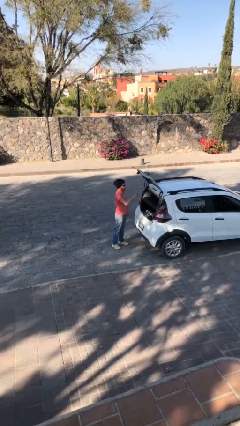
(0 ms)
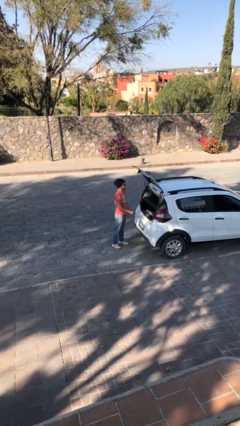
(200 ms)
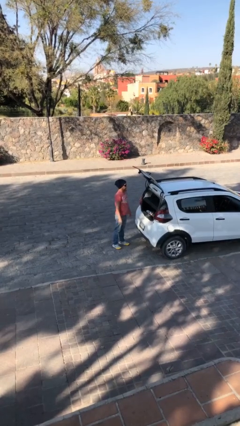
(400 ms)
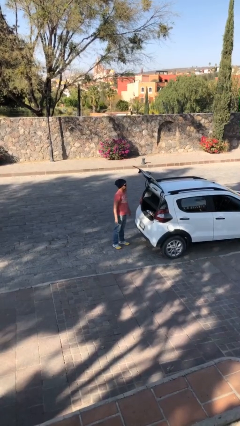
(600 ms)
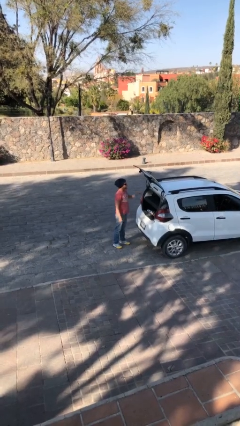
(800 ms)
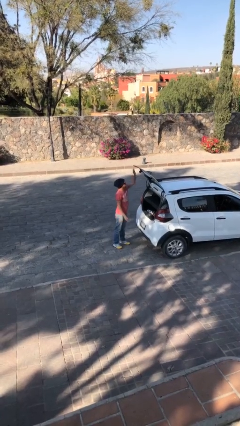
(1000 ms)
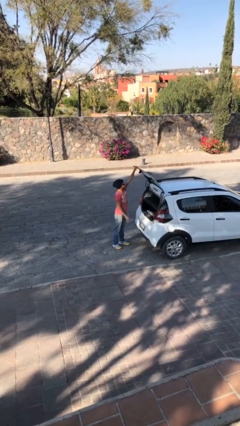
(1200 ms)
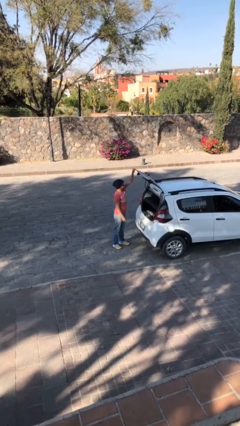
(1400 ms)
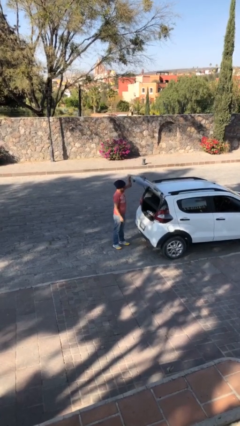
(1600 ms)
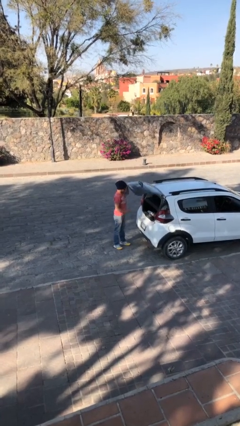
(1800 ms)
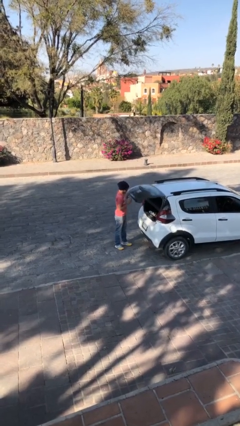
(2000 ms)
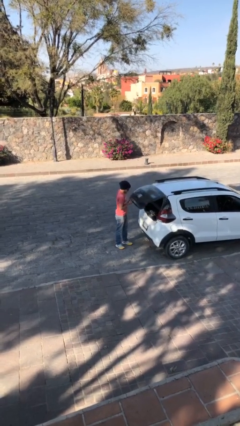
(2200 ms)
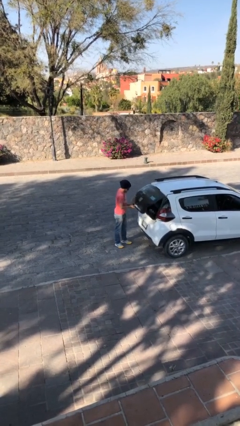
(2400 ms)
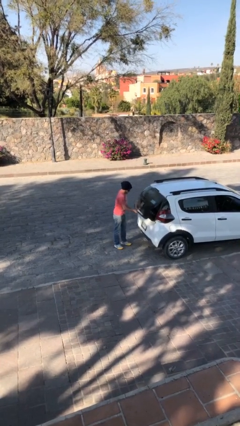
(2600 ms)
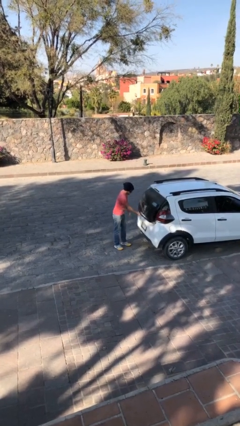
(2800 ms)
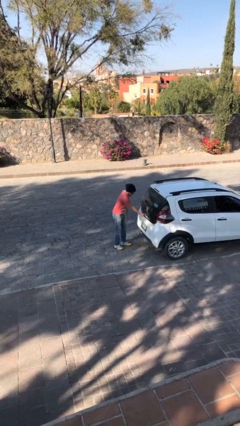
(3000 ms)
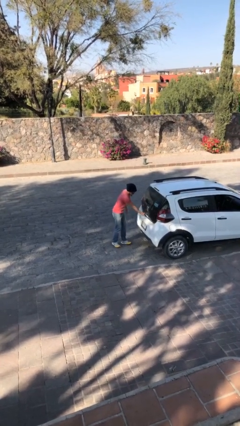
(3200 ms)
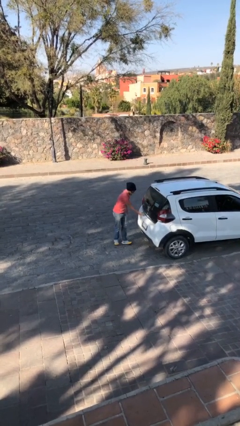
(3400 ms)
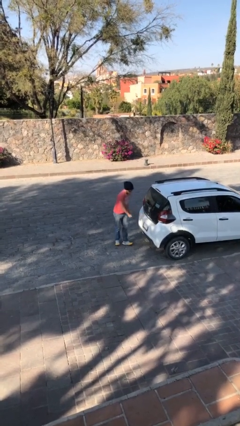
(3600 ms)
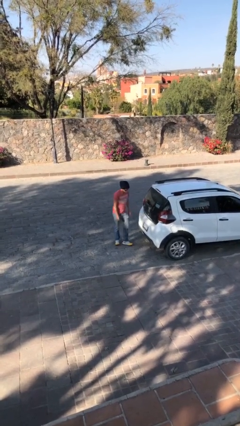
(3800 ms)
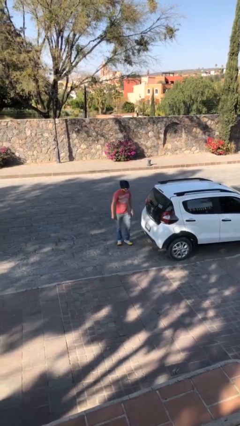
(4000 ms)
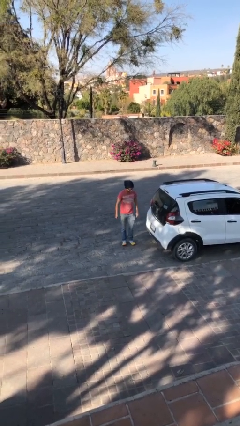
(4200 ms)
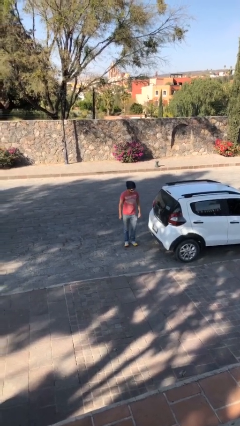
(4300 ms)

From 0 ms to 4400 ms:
person closes car trunk

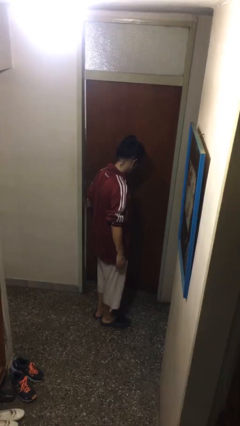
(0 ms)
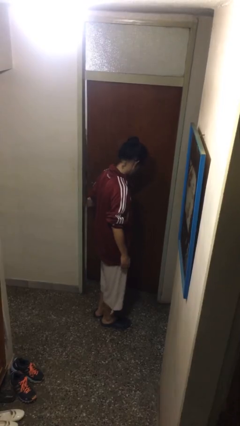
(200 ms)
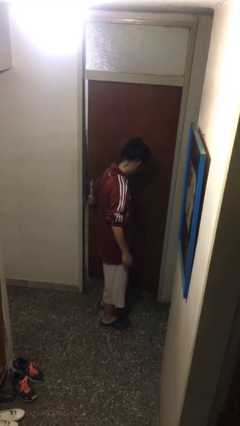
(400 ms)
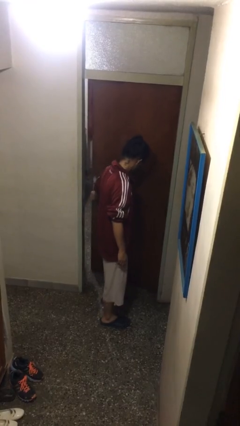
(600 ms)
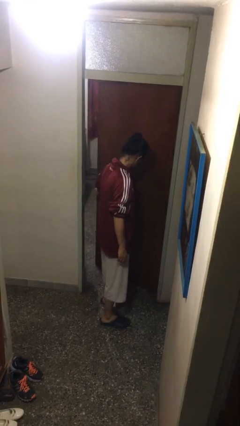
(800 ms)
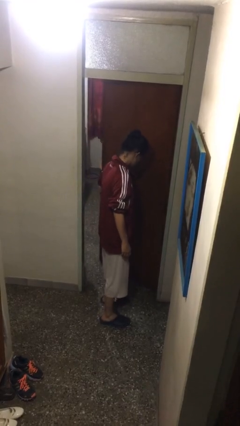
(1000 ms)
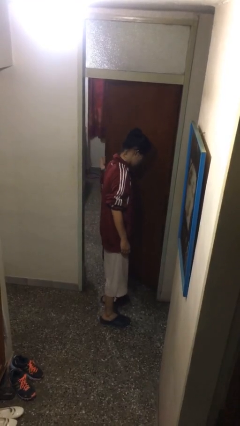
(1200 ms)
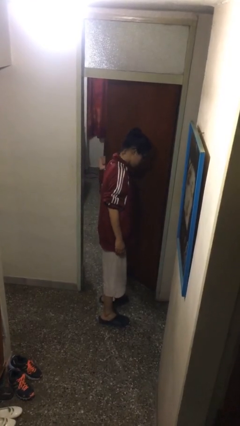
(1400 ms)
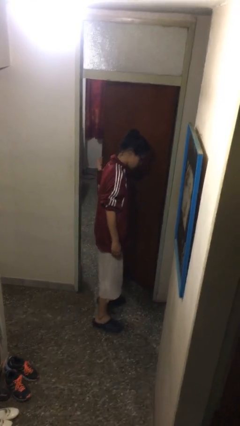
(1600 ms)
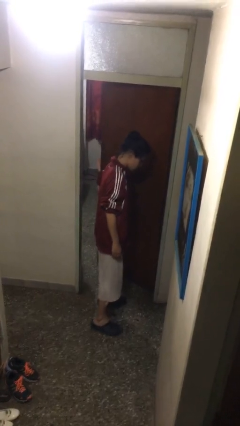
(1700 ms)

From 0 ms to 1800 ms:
person opens facility door

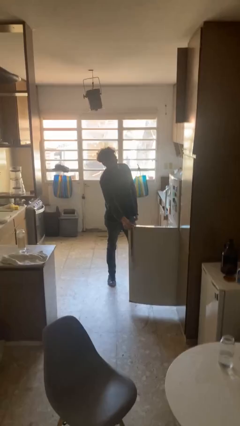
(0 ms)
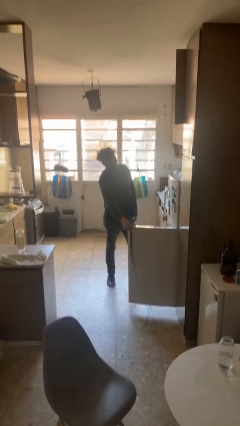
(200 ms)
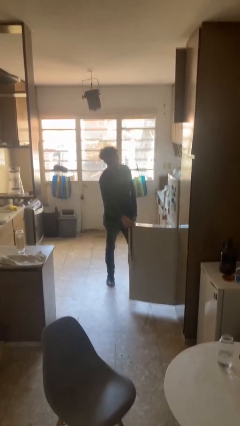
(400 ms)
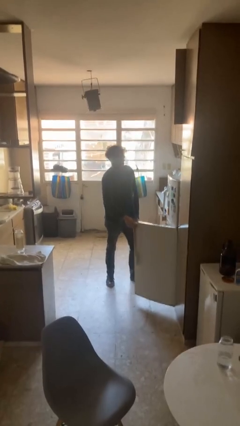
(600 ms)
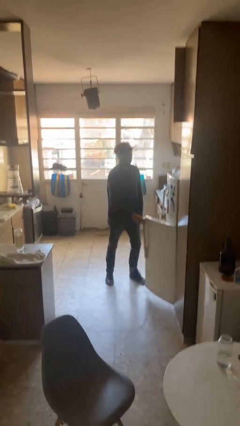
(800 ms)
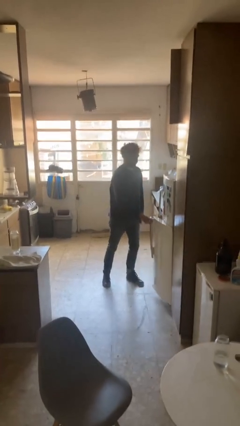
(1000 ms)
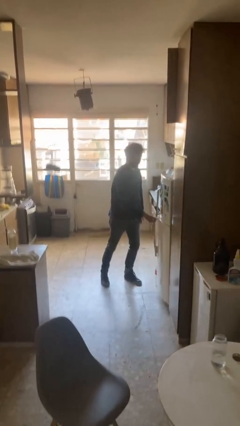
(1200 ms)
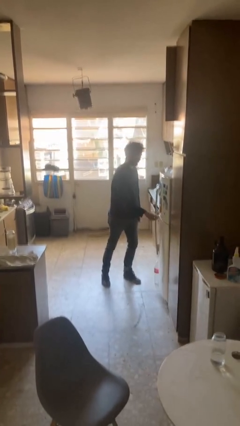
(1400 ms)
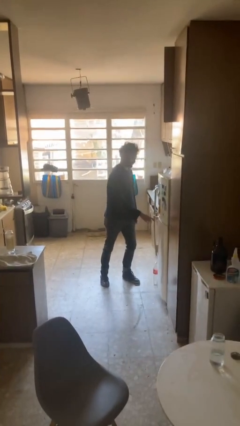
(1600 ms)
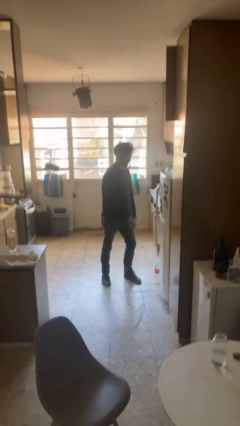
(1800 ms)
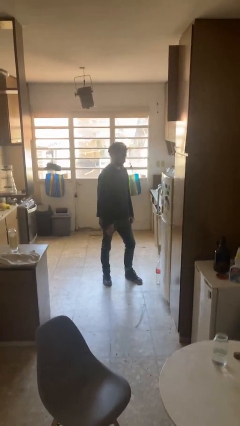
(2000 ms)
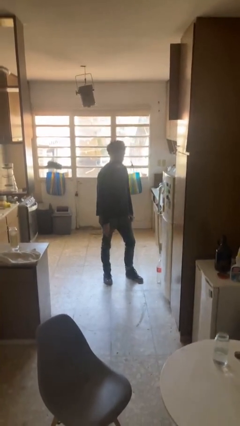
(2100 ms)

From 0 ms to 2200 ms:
person closes refrigerator

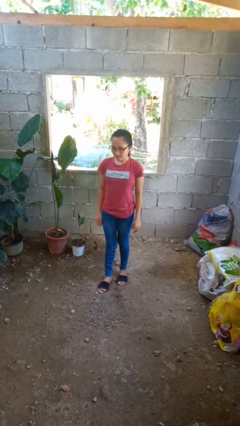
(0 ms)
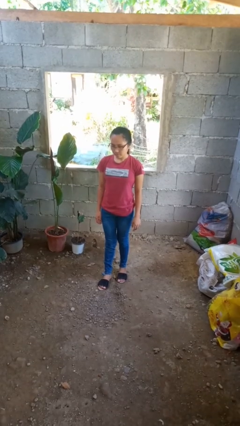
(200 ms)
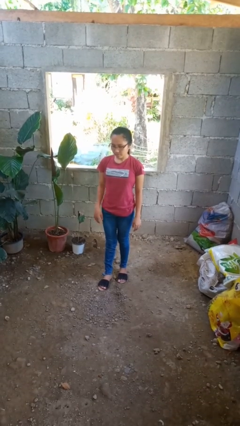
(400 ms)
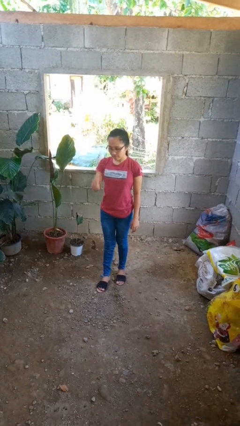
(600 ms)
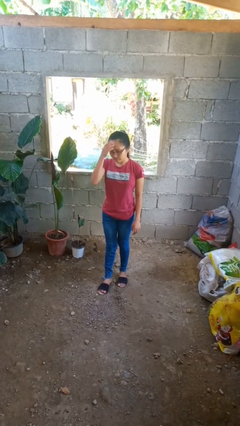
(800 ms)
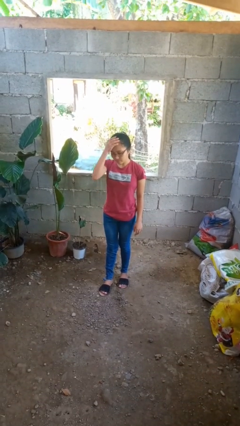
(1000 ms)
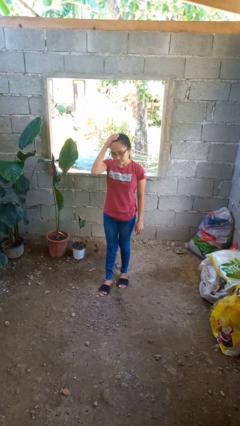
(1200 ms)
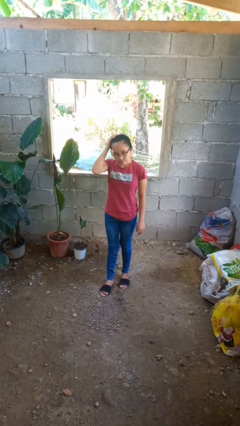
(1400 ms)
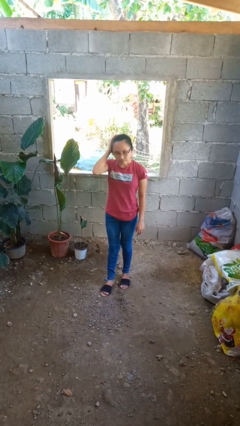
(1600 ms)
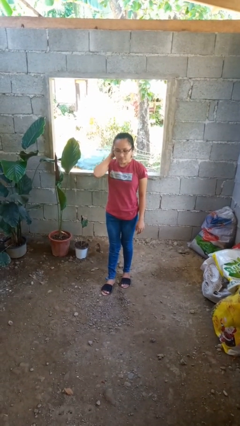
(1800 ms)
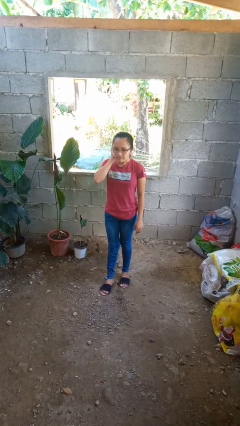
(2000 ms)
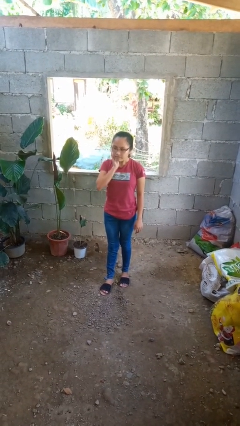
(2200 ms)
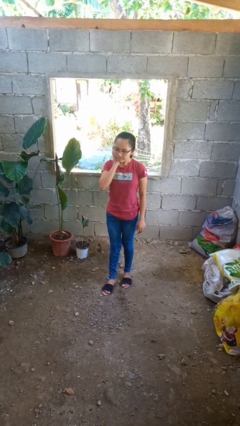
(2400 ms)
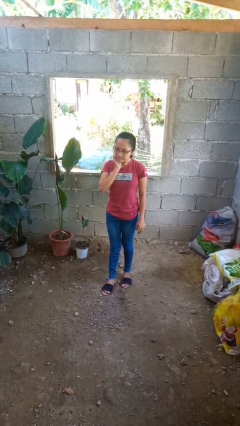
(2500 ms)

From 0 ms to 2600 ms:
person scratches face

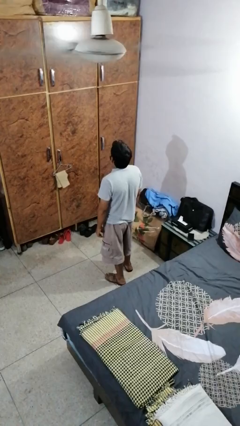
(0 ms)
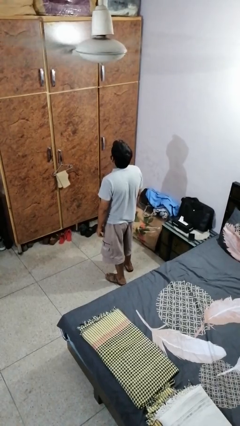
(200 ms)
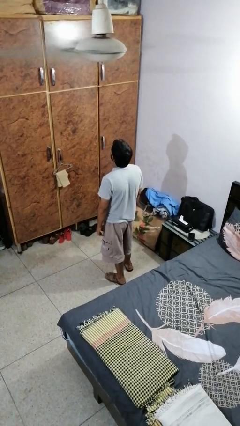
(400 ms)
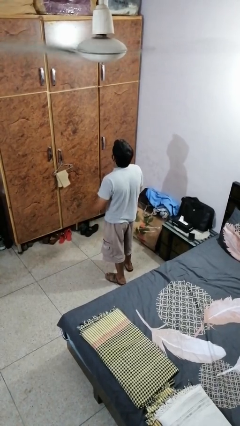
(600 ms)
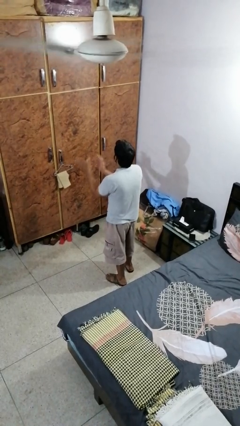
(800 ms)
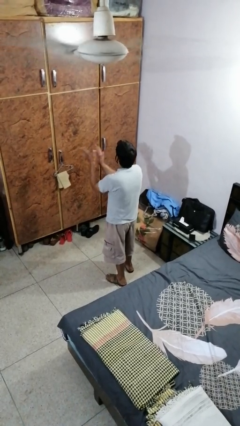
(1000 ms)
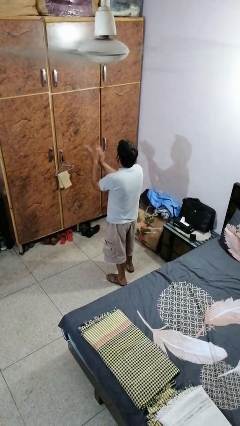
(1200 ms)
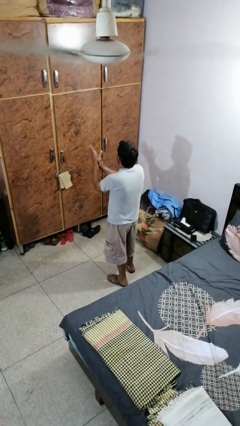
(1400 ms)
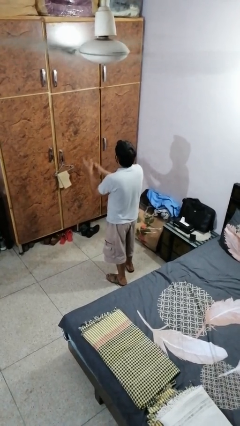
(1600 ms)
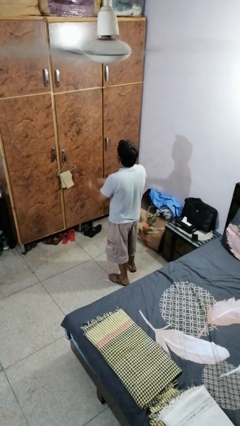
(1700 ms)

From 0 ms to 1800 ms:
person claps hands

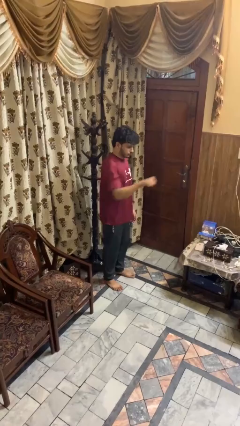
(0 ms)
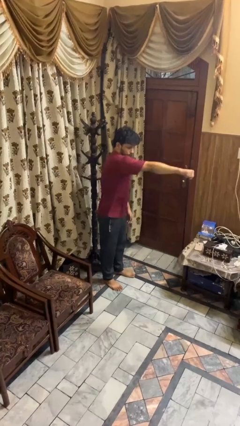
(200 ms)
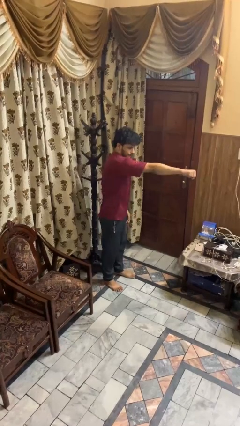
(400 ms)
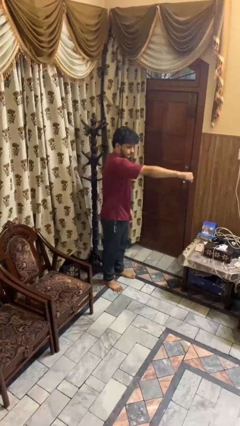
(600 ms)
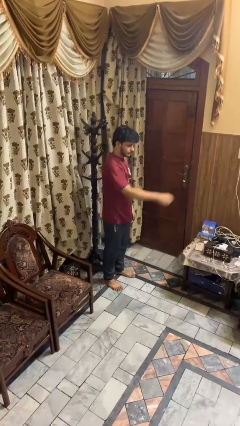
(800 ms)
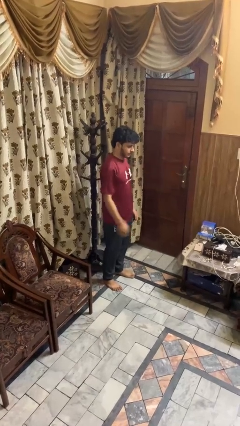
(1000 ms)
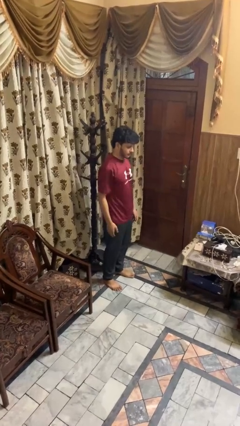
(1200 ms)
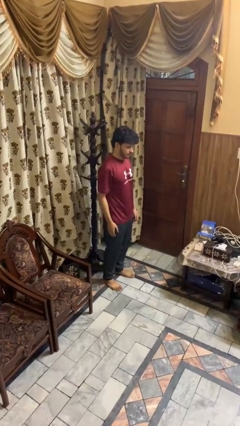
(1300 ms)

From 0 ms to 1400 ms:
person punches

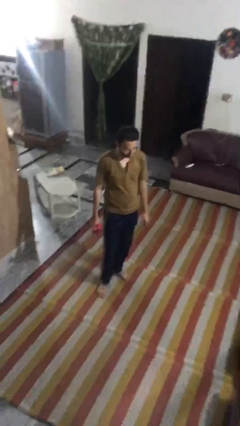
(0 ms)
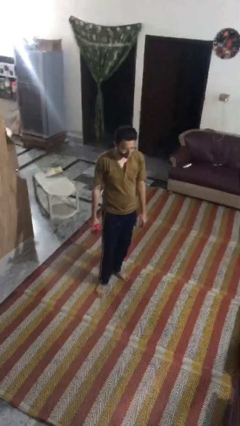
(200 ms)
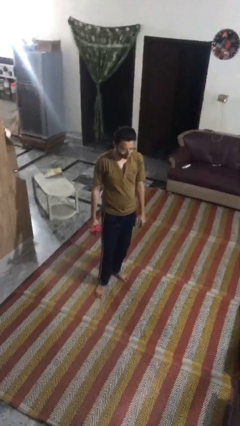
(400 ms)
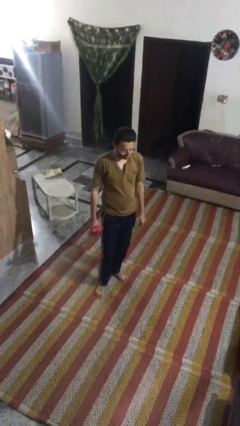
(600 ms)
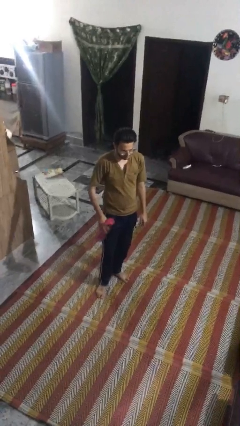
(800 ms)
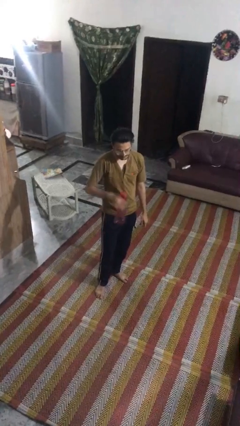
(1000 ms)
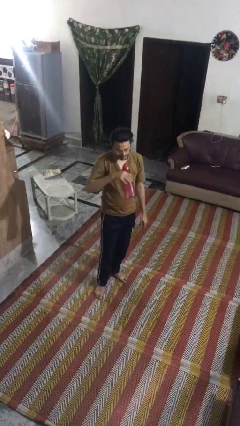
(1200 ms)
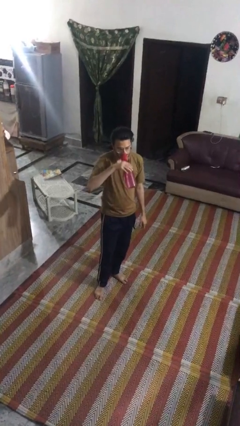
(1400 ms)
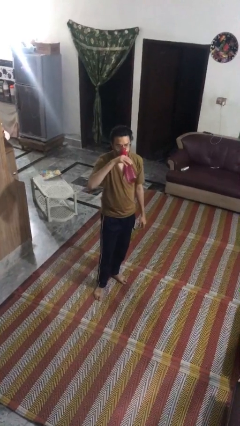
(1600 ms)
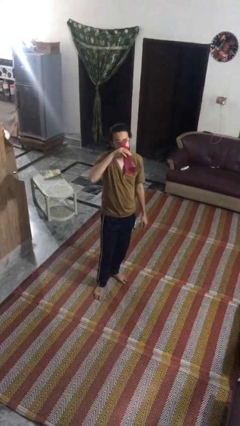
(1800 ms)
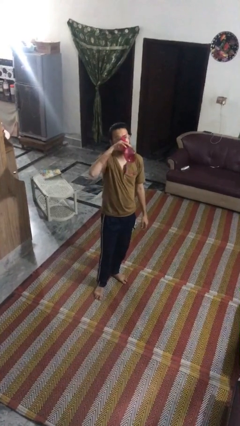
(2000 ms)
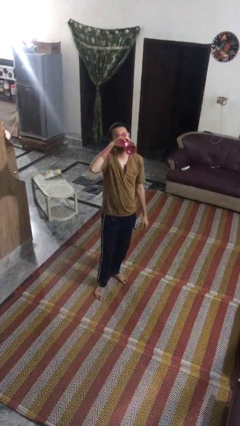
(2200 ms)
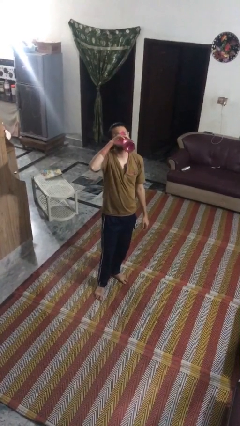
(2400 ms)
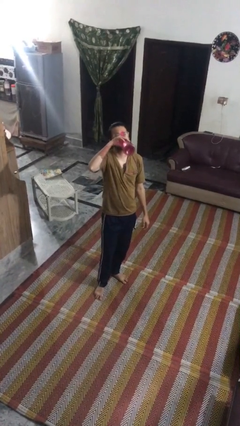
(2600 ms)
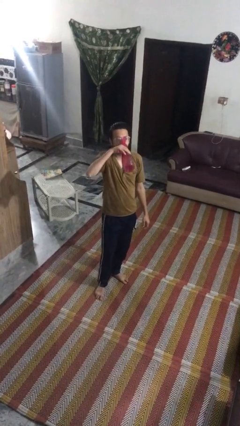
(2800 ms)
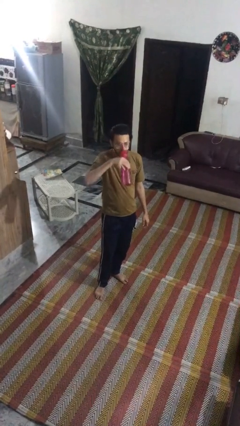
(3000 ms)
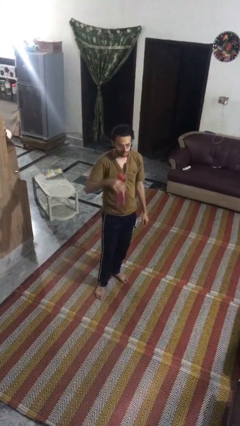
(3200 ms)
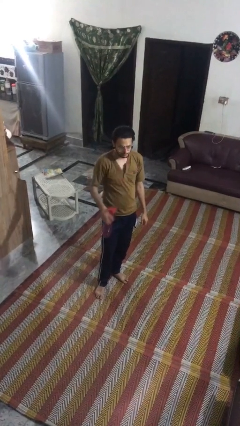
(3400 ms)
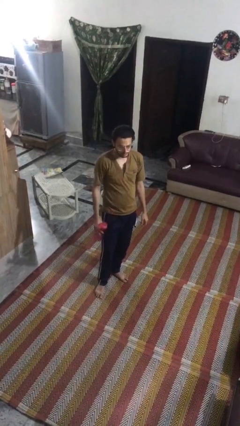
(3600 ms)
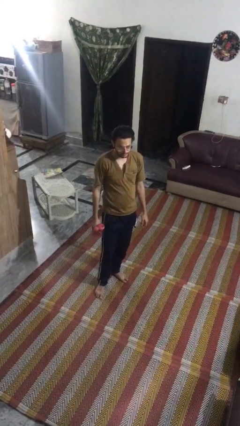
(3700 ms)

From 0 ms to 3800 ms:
person drinks from bottle
